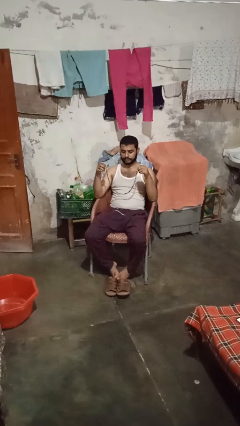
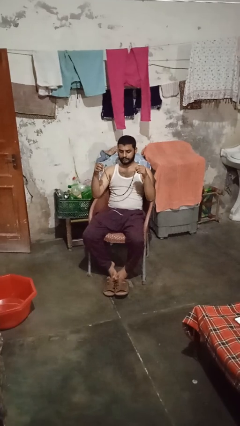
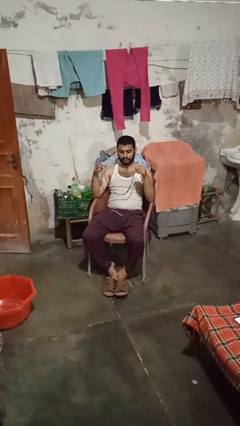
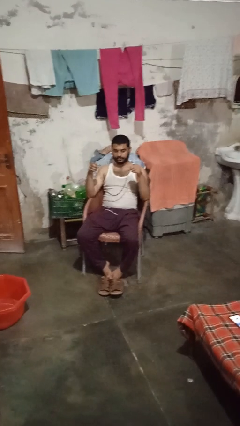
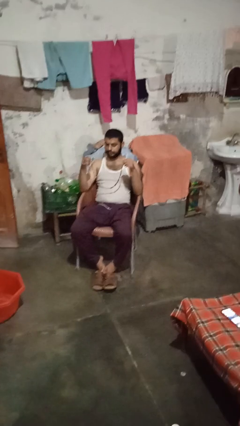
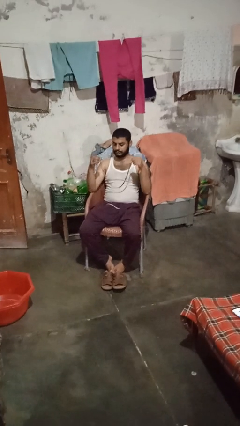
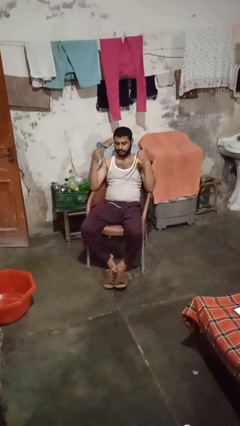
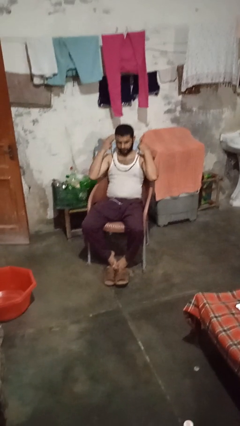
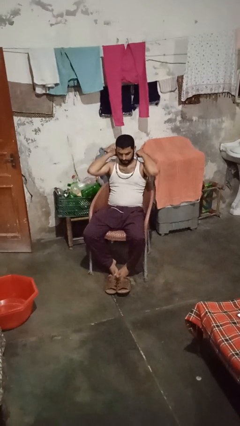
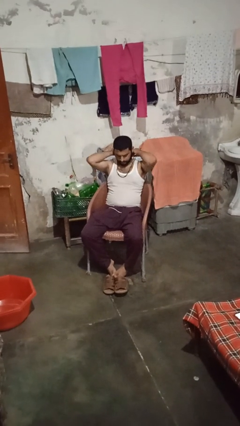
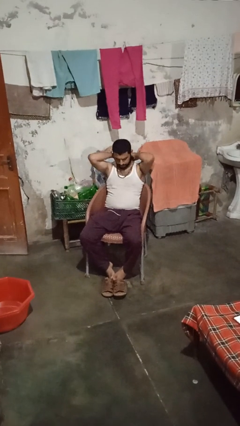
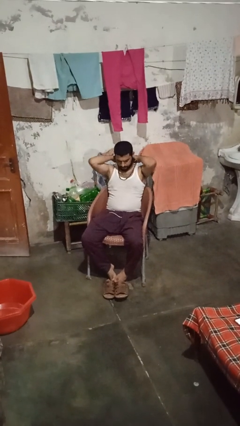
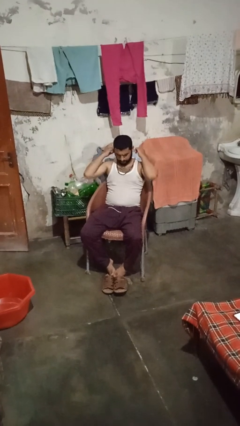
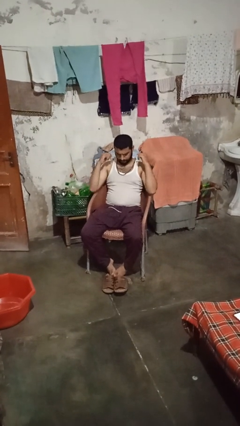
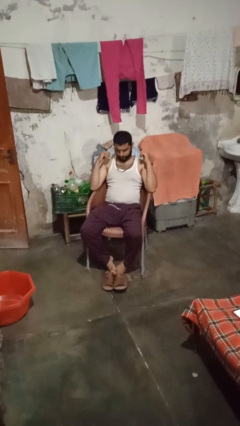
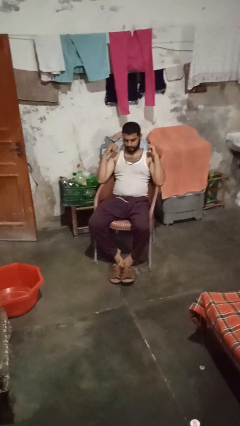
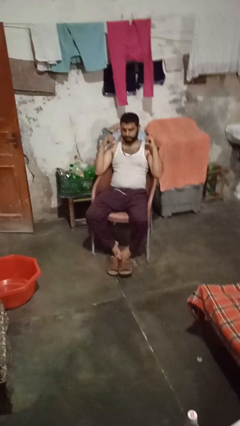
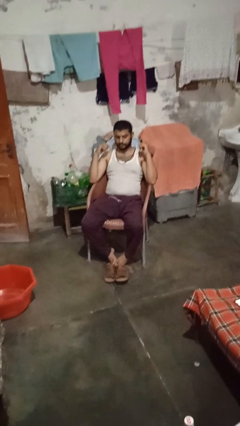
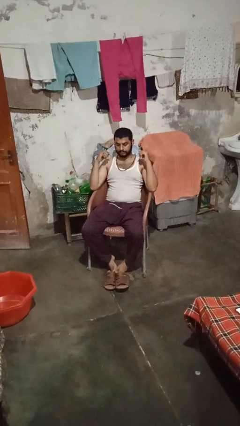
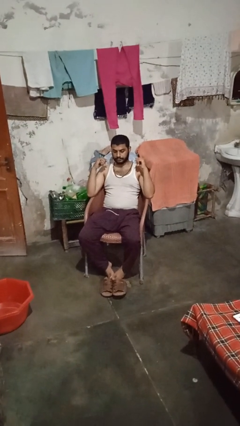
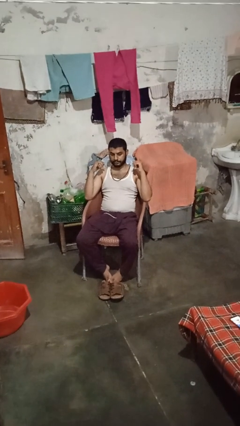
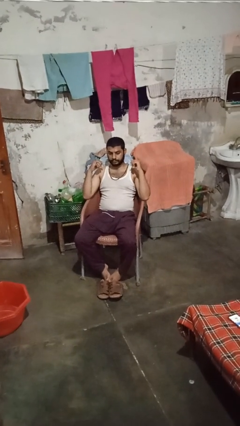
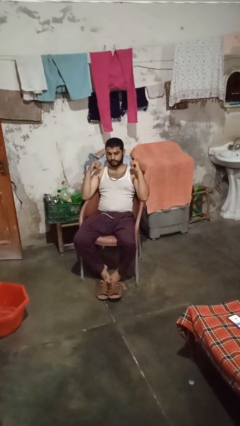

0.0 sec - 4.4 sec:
person puts on necklace

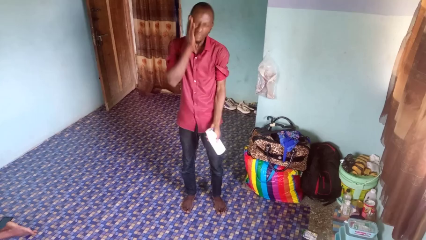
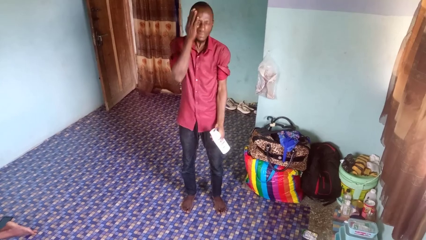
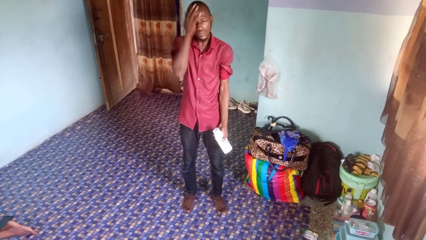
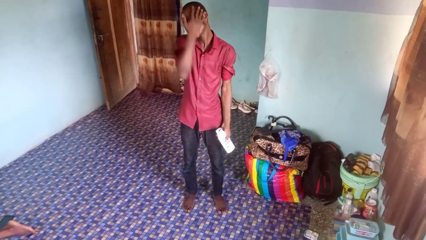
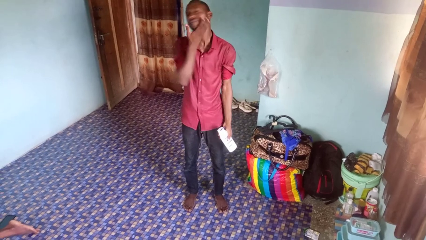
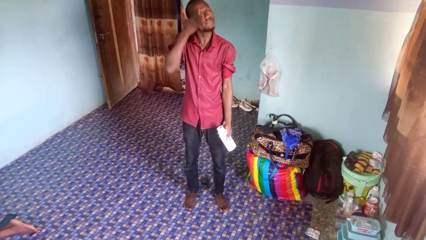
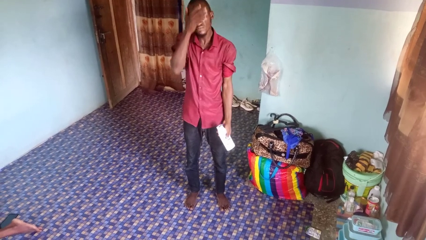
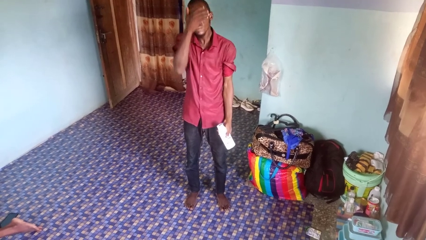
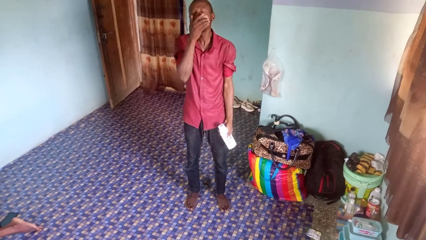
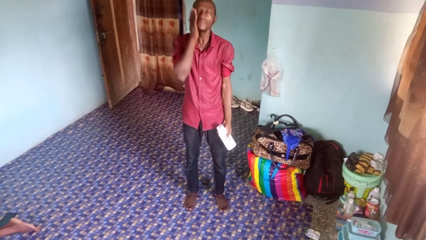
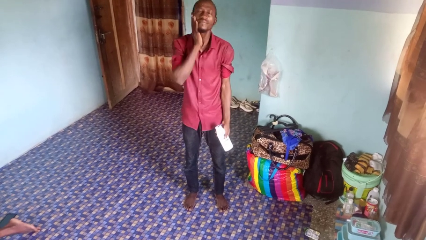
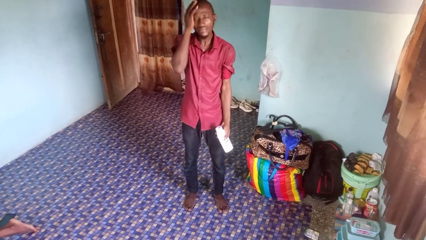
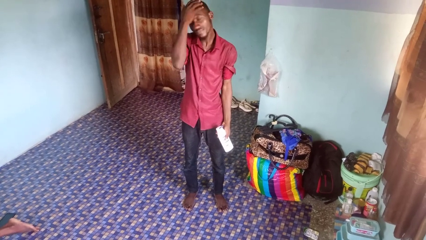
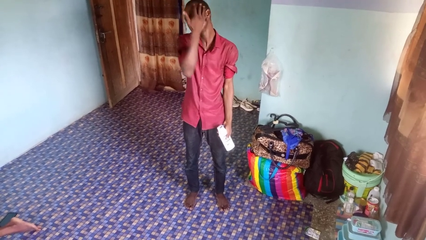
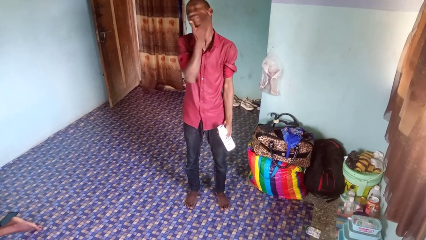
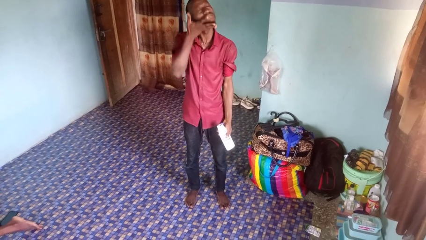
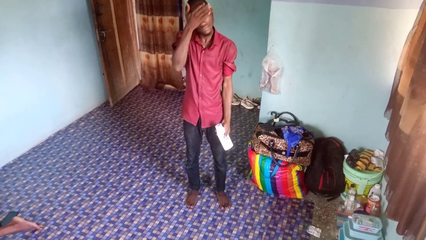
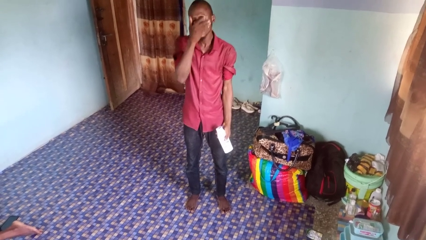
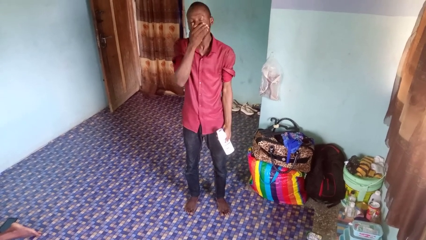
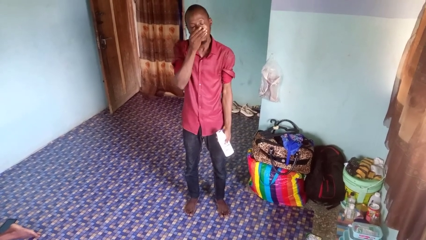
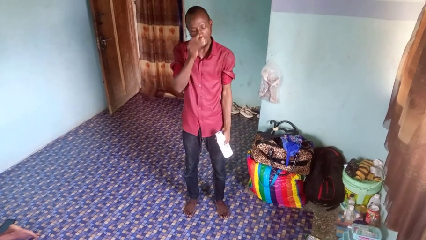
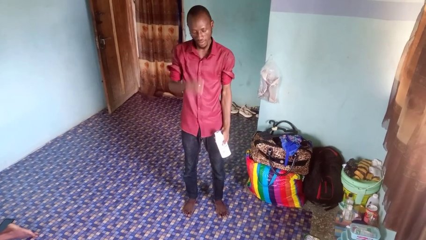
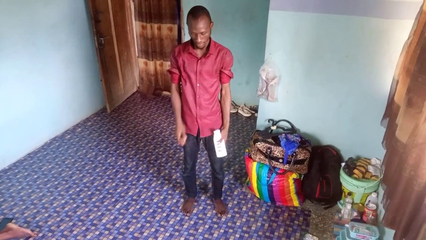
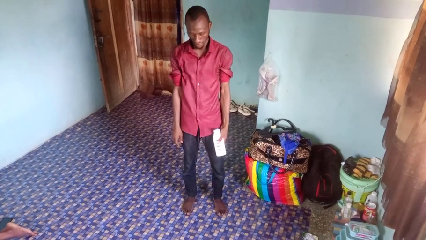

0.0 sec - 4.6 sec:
person applies sunscreen

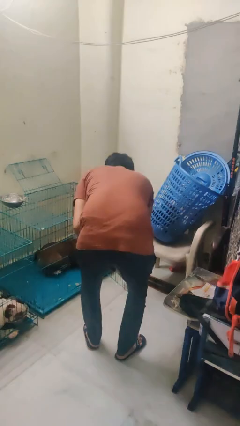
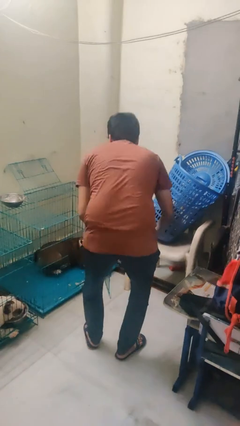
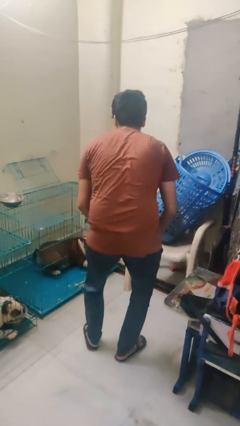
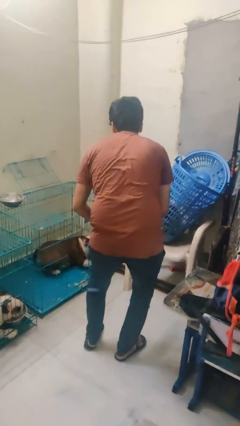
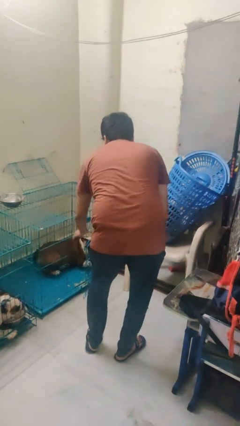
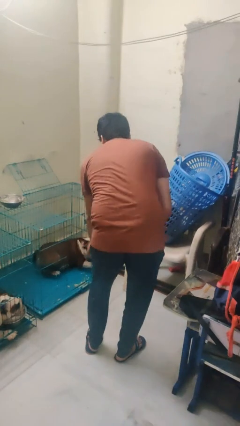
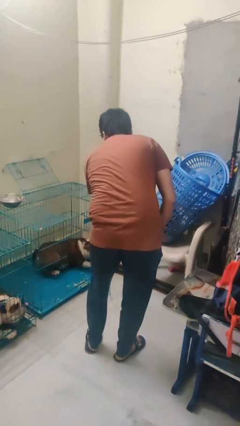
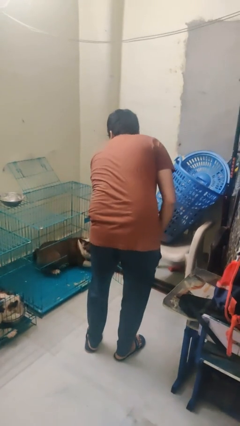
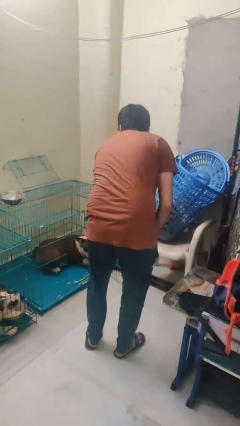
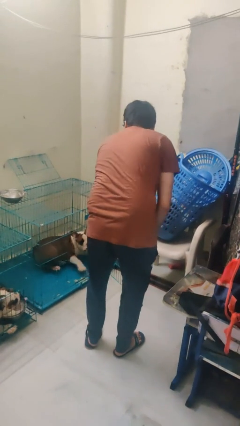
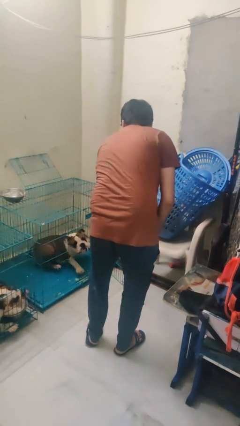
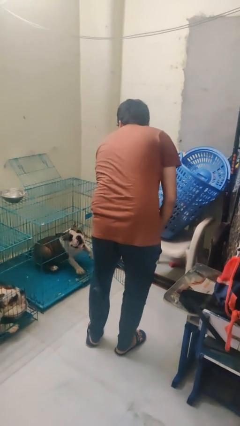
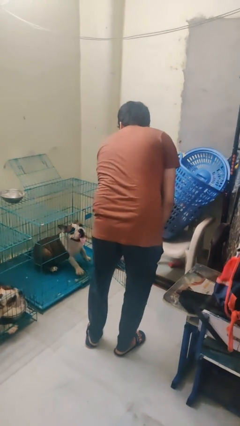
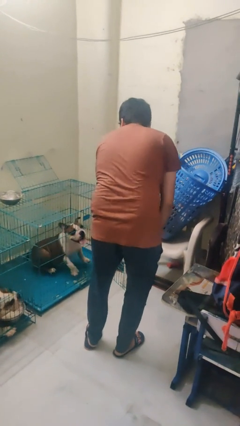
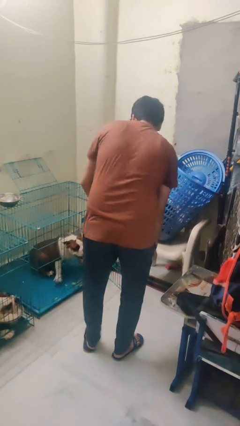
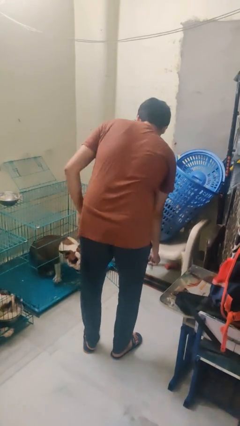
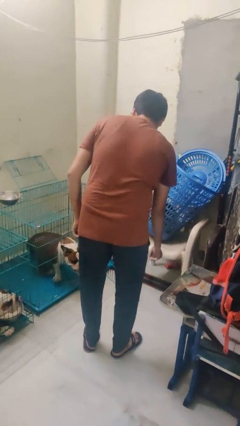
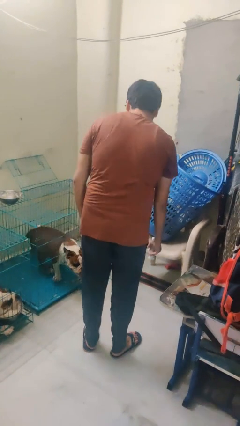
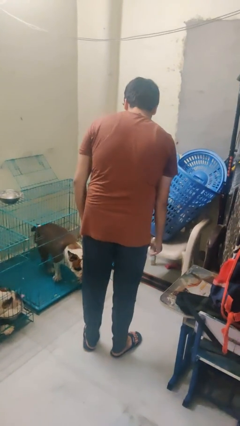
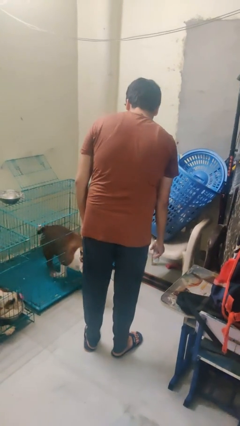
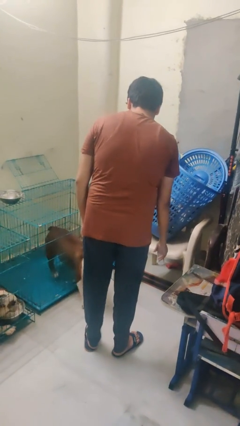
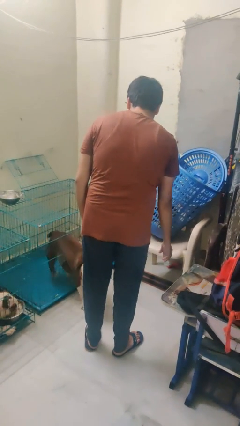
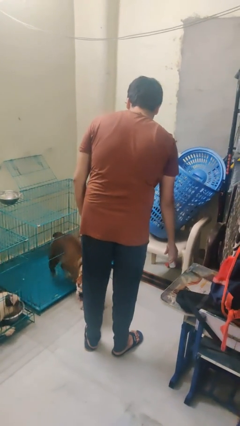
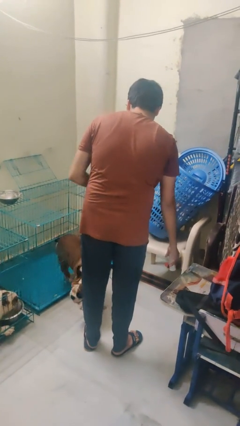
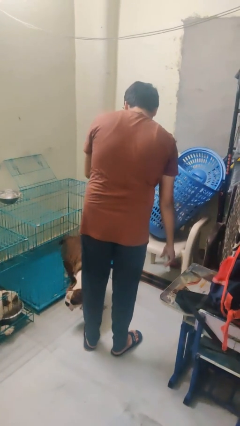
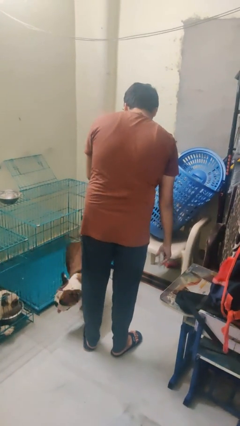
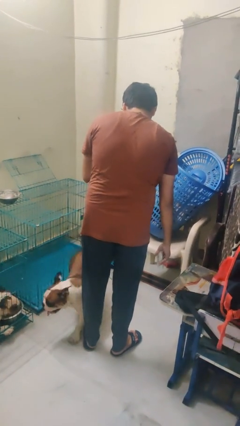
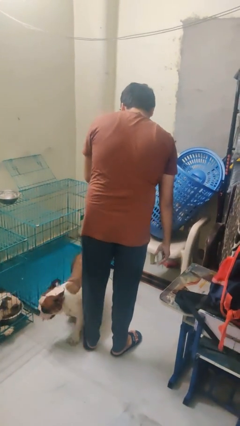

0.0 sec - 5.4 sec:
person uncrates dog

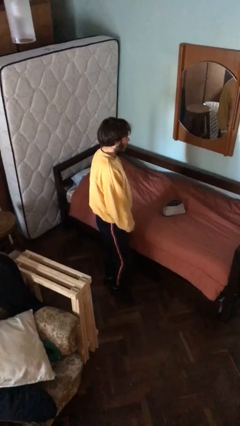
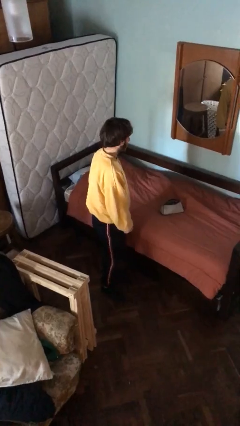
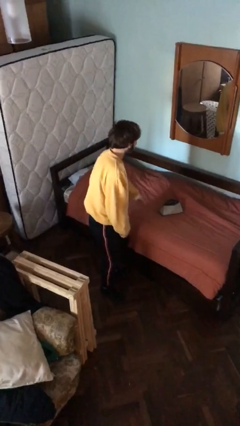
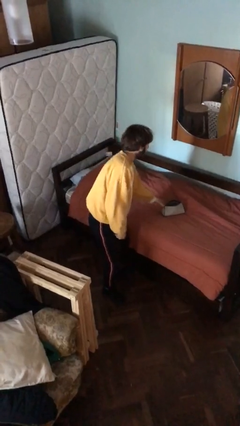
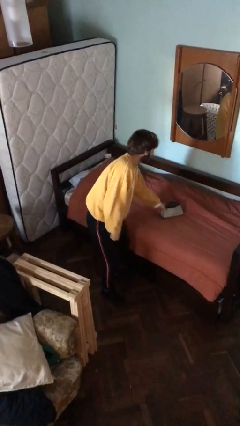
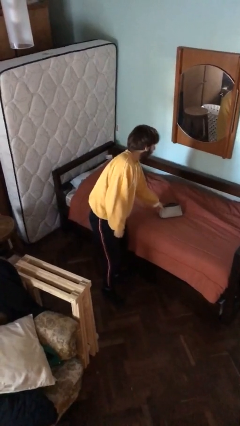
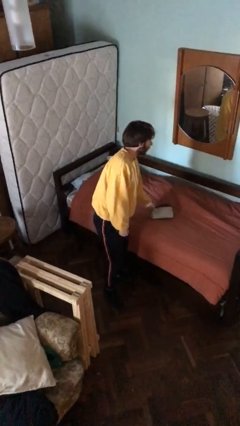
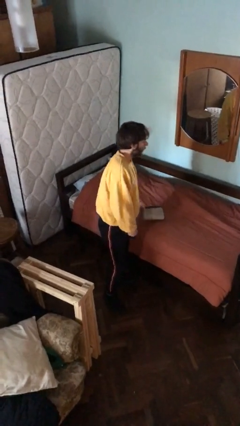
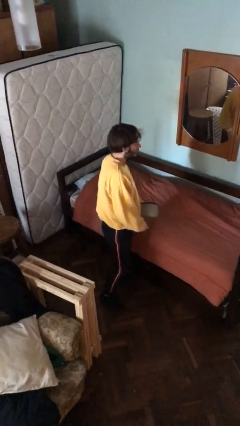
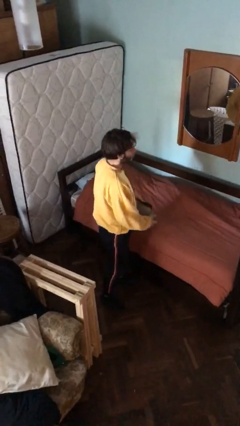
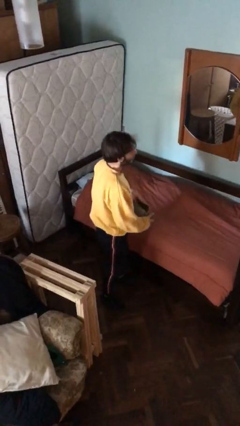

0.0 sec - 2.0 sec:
person picks up object from bed

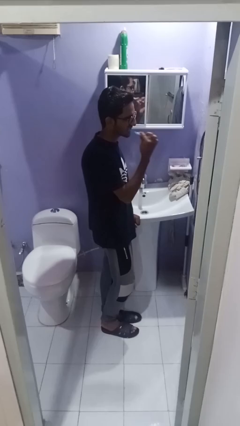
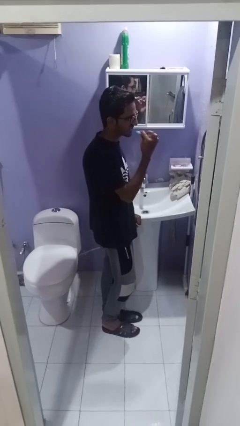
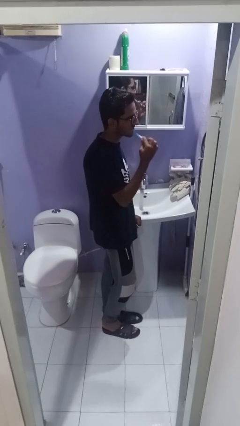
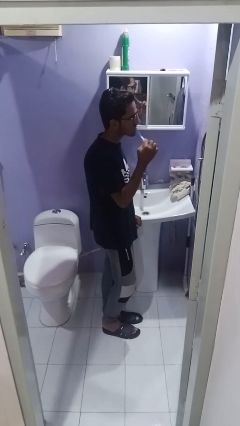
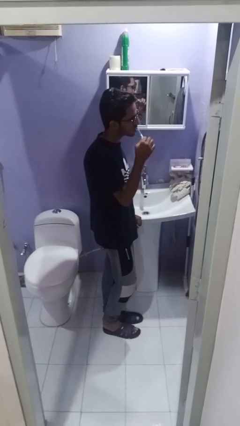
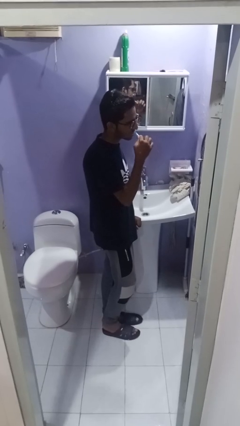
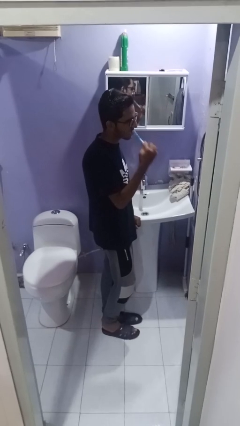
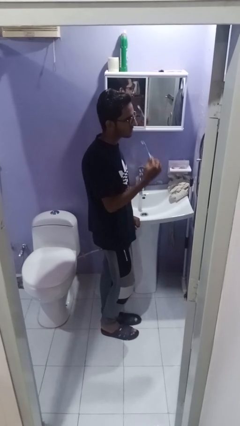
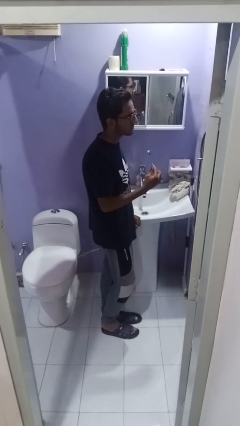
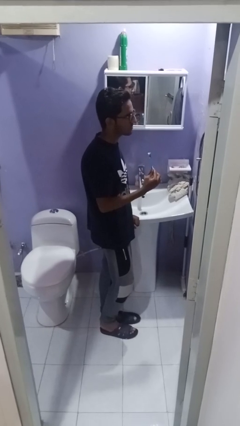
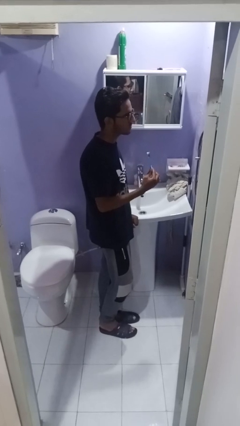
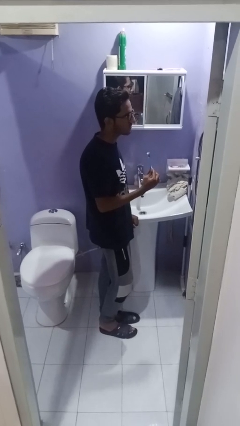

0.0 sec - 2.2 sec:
person brushes teeth
